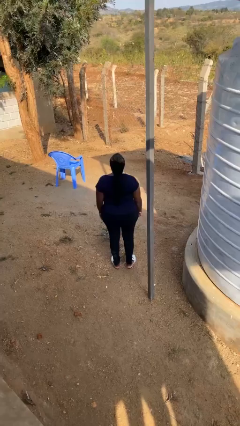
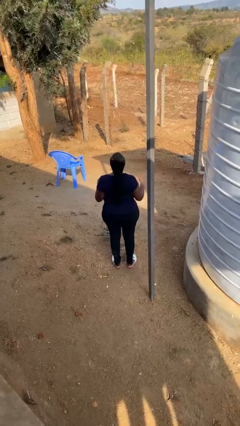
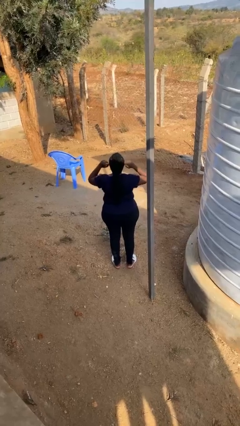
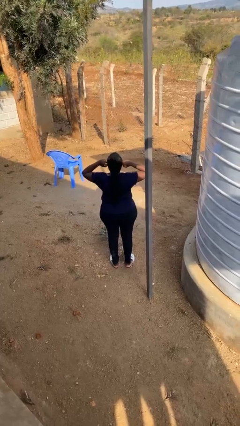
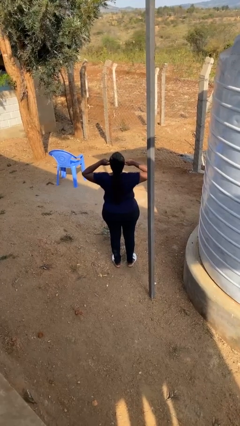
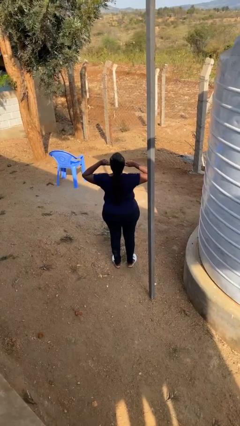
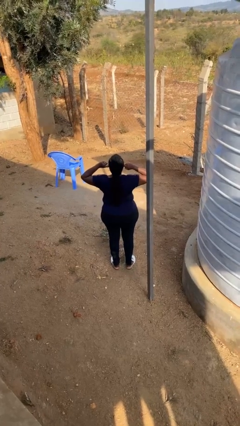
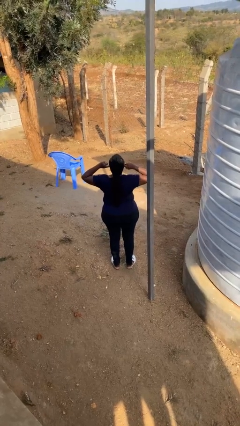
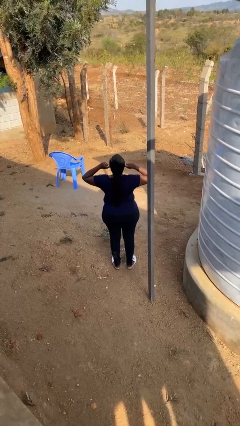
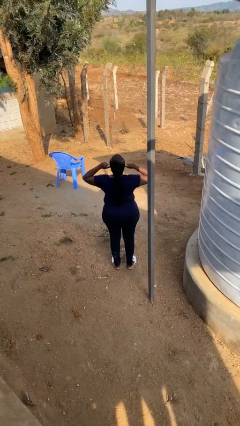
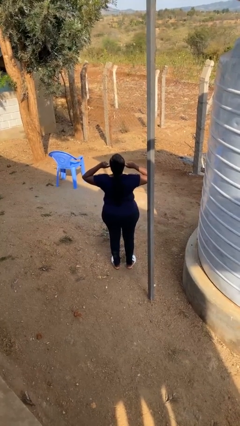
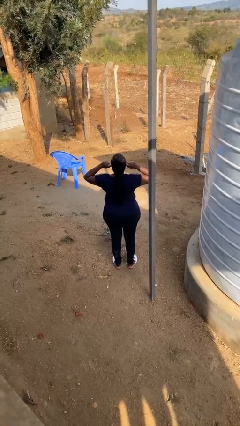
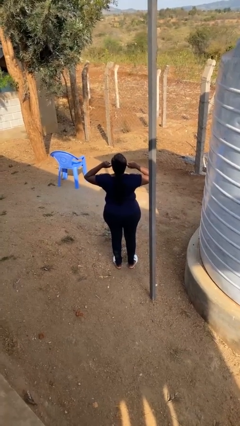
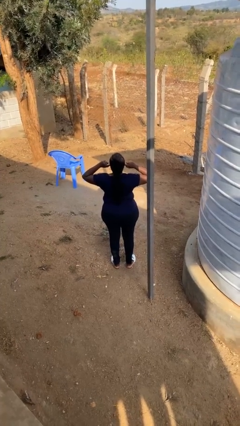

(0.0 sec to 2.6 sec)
person puts fingers in ear

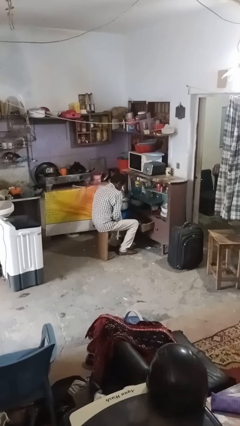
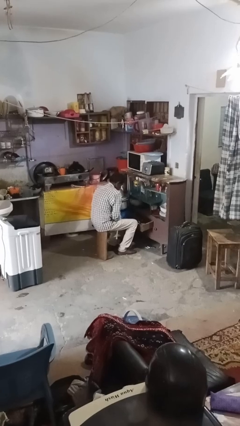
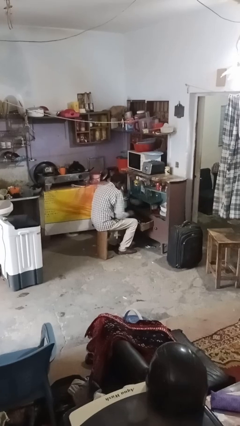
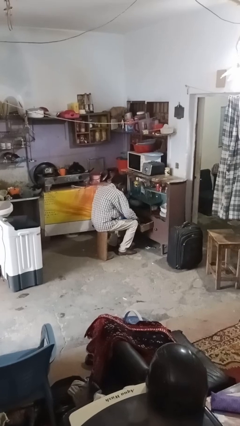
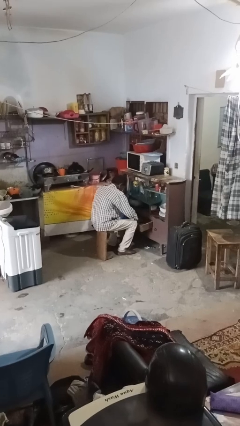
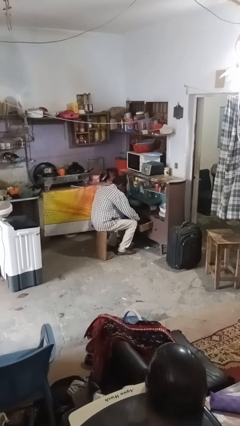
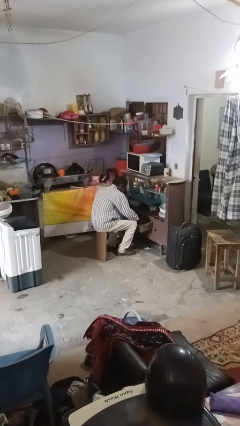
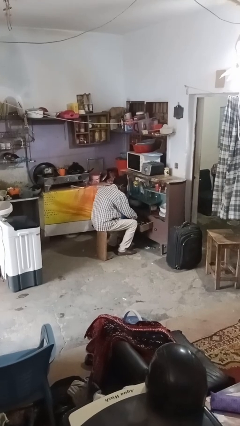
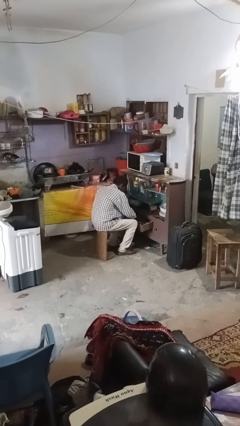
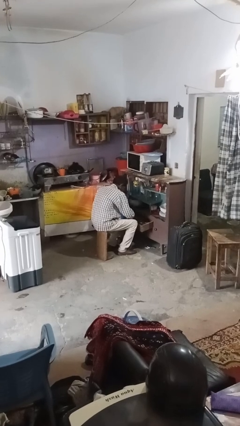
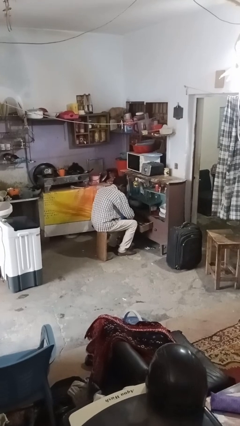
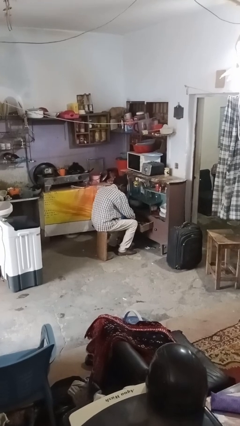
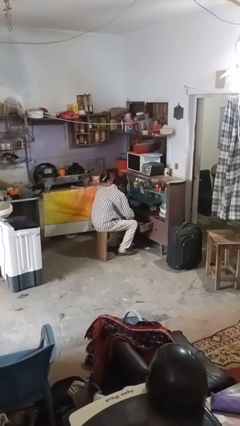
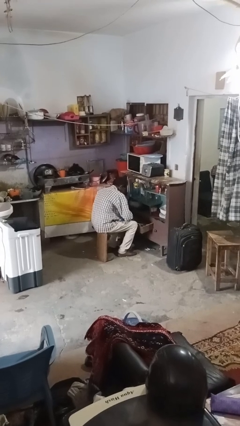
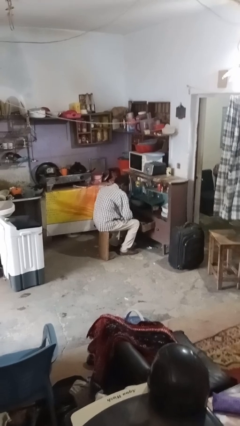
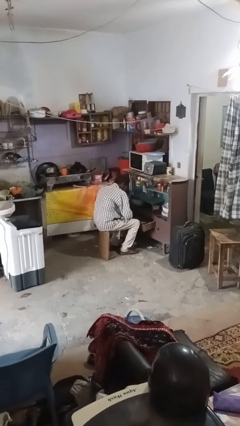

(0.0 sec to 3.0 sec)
person searches in kitchen drawer

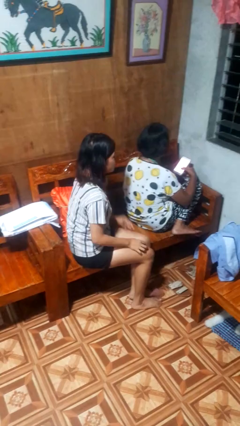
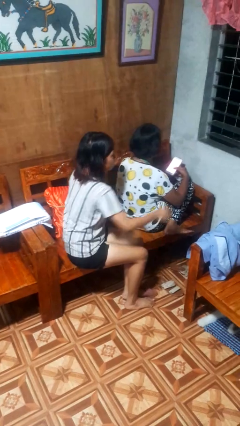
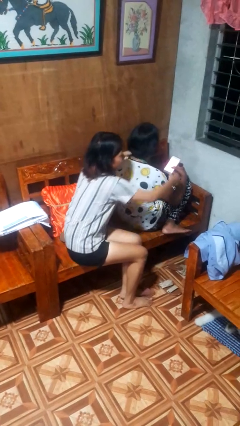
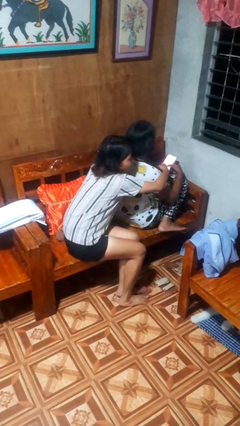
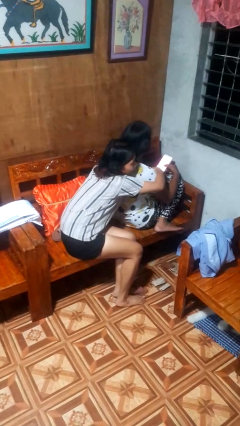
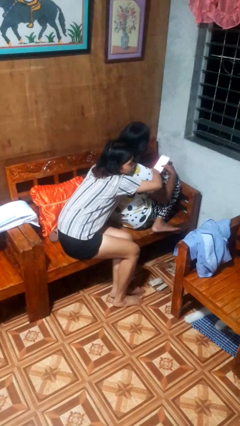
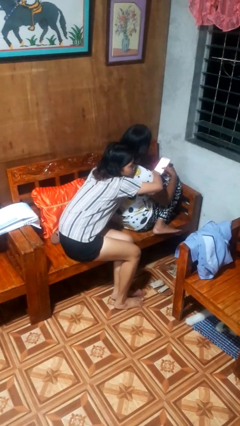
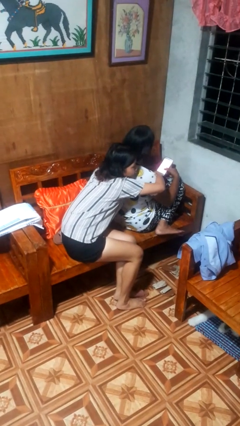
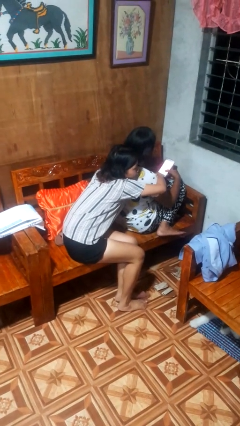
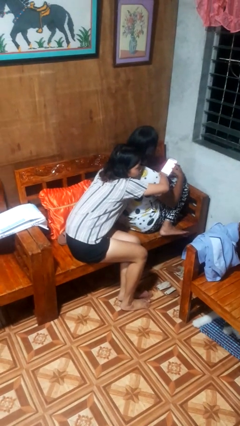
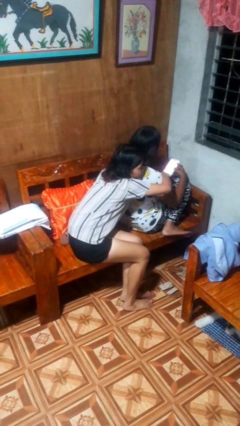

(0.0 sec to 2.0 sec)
person hugs person from behind

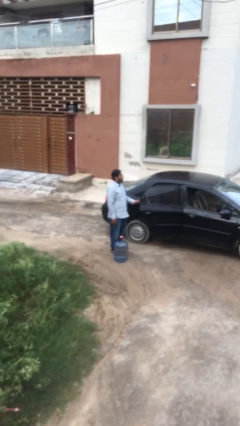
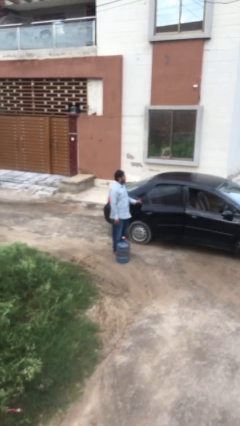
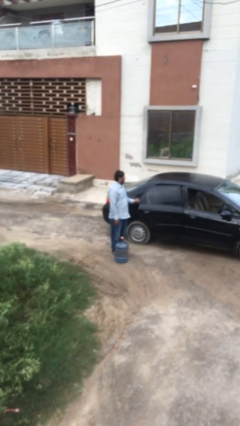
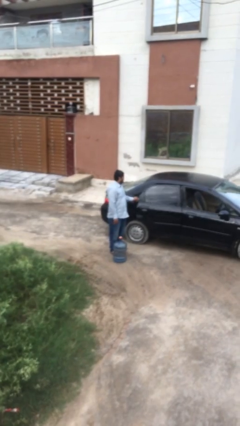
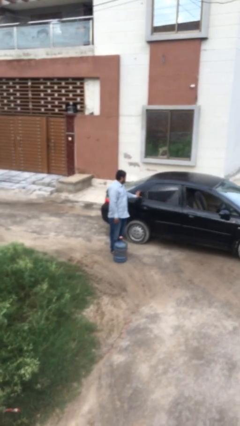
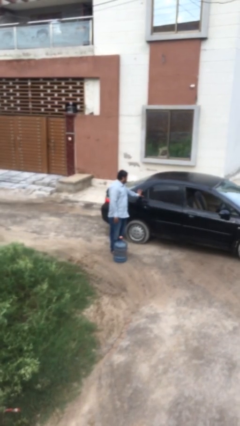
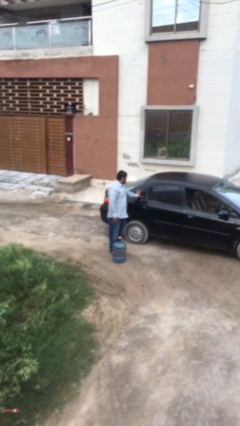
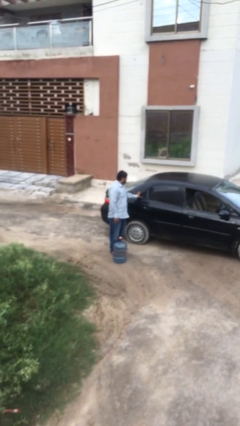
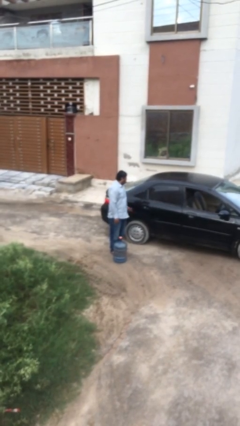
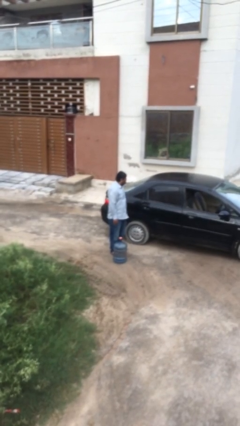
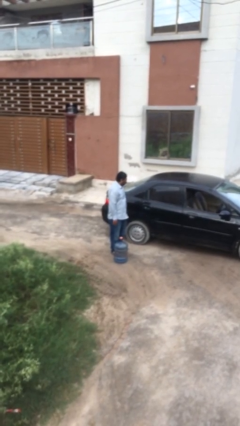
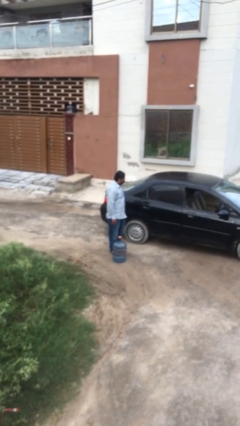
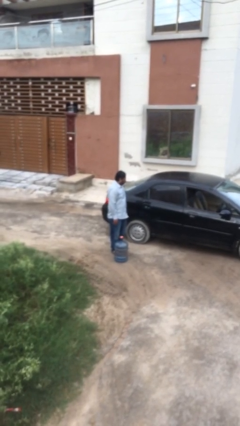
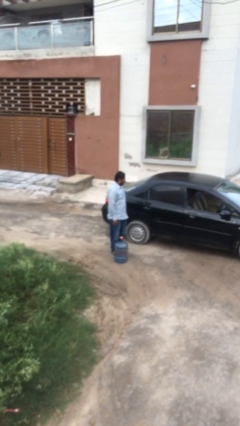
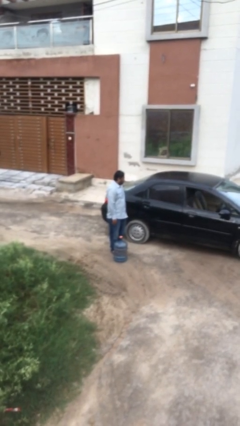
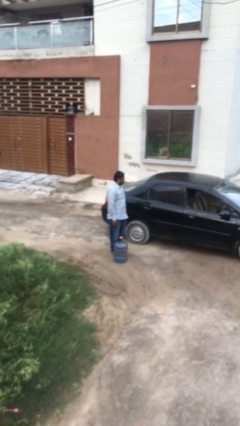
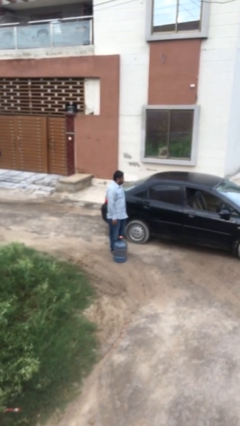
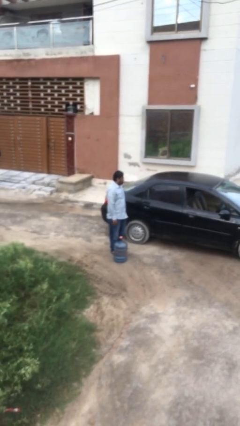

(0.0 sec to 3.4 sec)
person closes car door

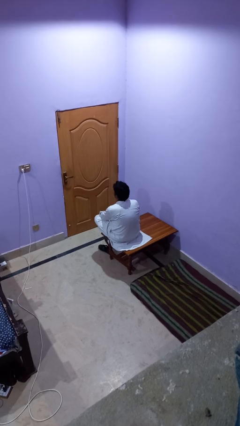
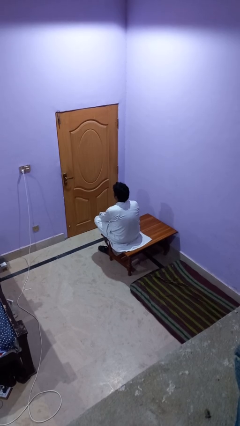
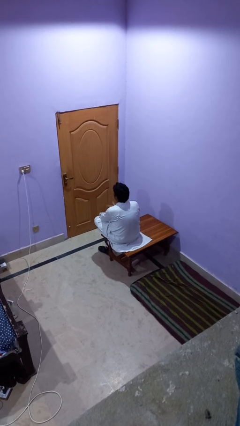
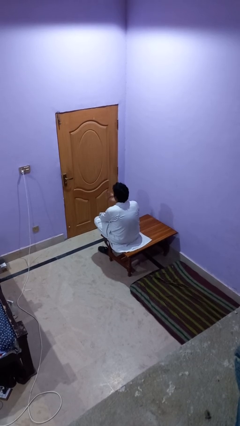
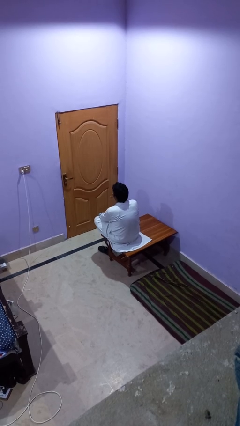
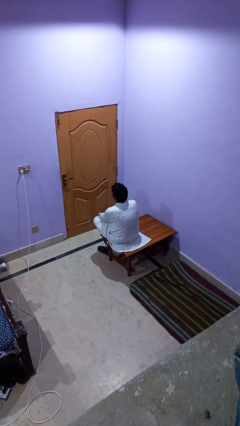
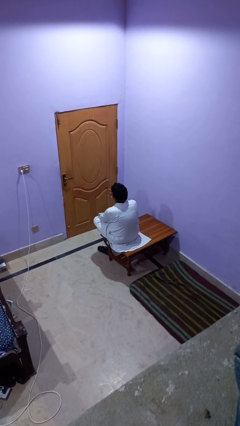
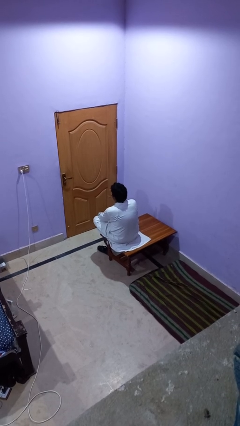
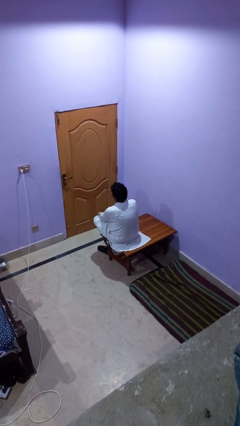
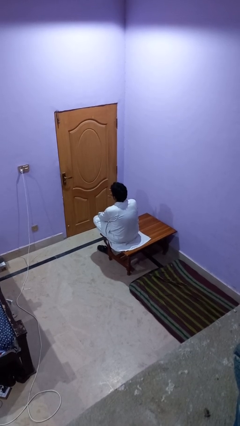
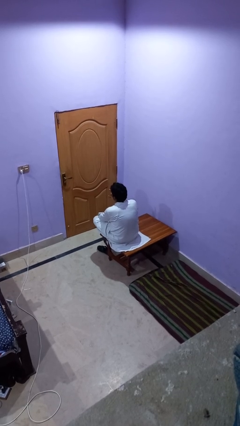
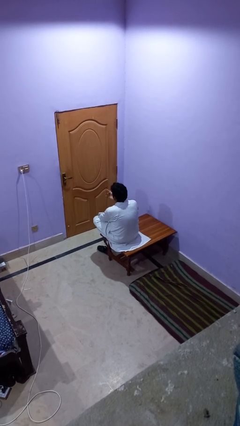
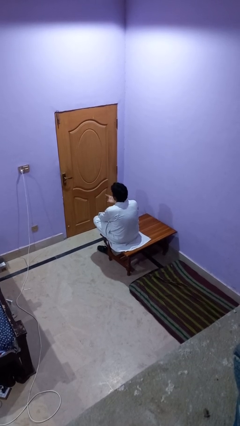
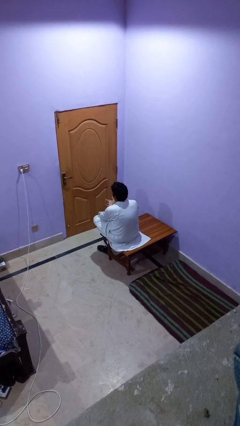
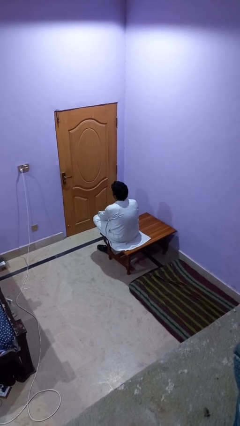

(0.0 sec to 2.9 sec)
person licks fingers

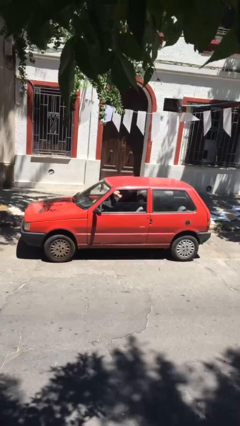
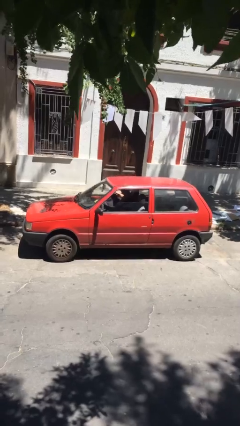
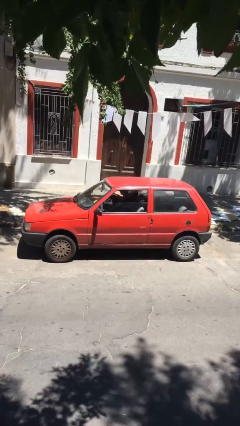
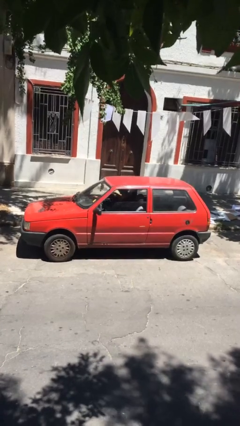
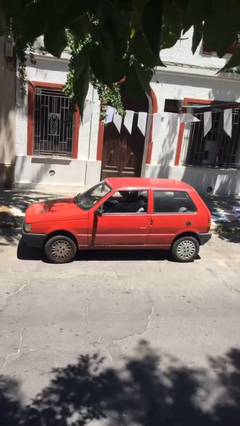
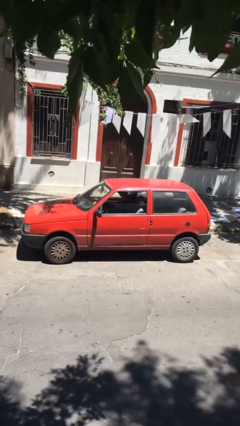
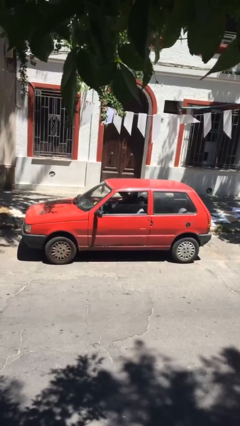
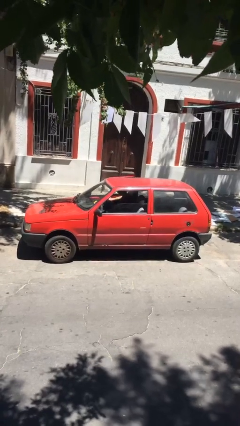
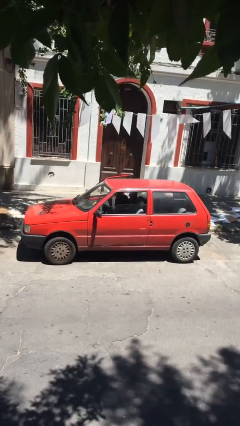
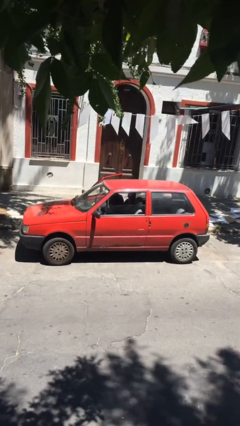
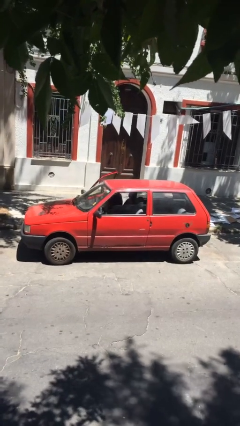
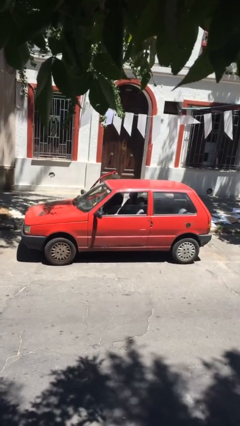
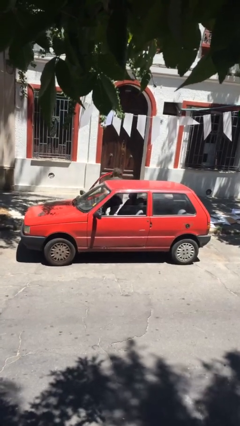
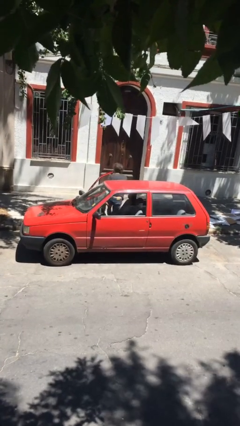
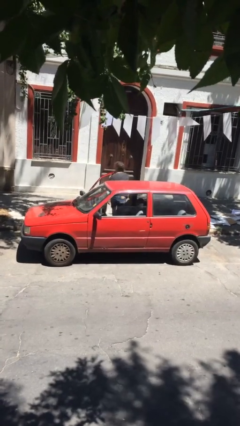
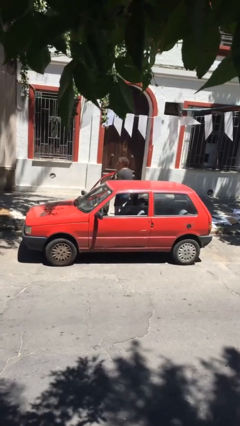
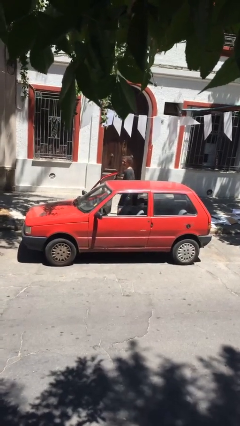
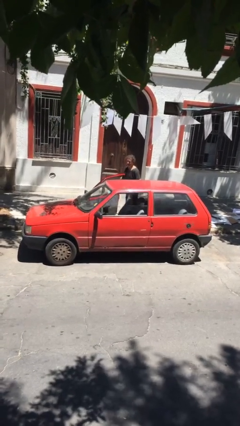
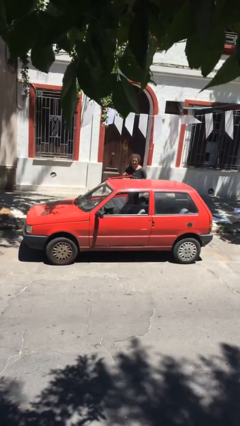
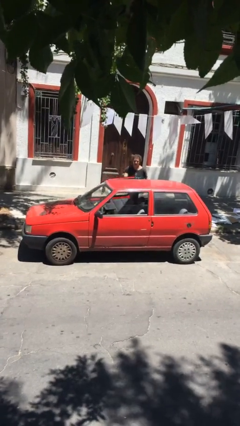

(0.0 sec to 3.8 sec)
car drops off person
